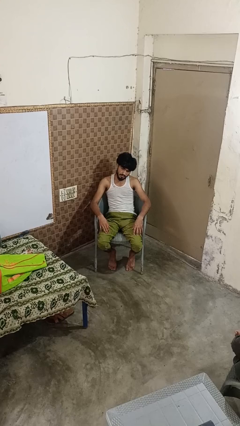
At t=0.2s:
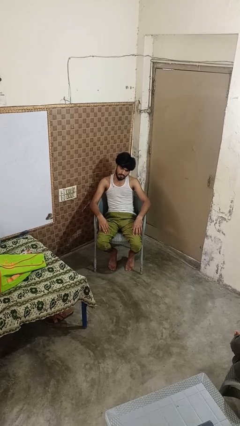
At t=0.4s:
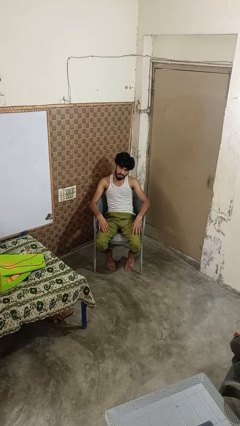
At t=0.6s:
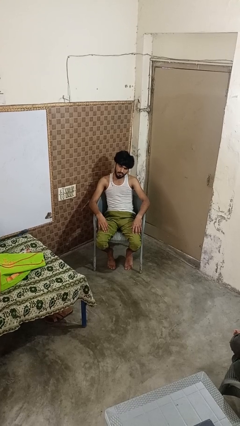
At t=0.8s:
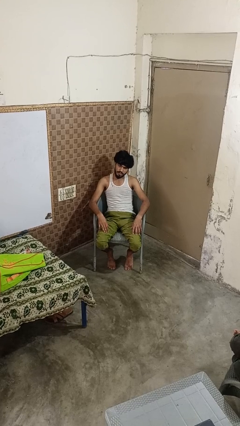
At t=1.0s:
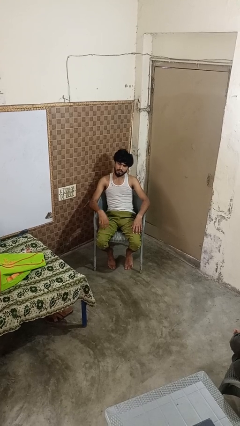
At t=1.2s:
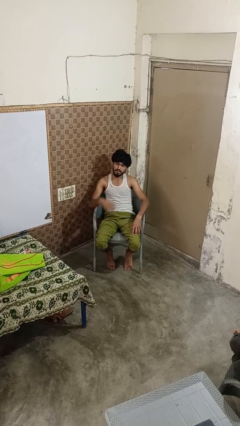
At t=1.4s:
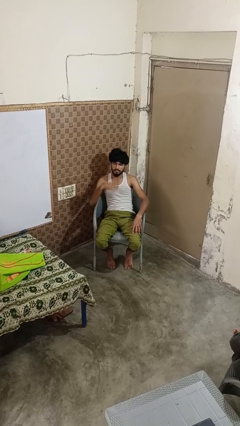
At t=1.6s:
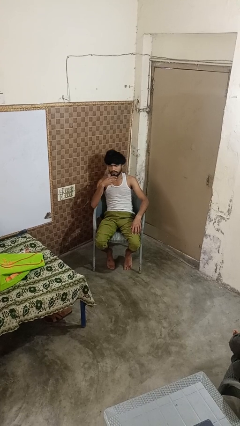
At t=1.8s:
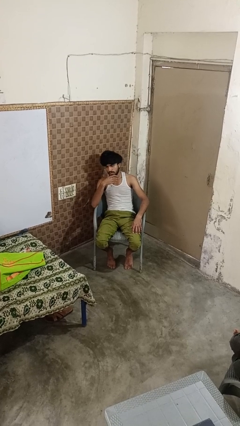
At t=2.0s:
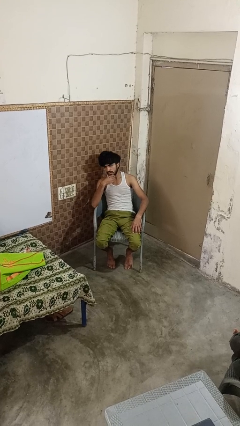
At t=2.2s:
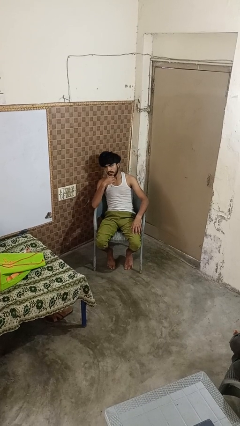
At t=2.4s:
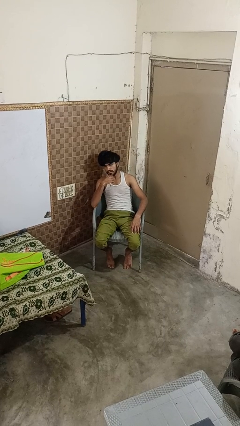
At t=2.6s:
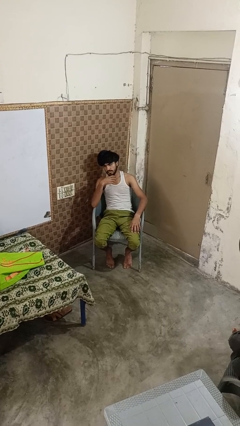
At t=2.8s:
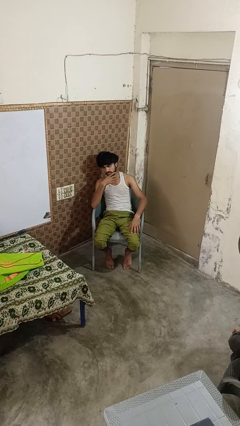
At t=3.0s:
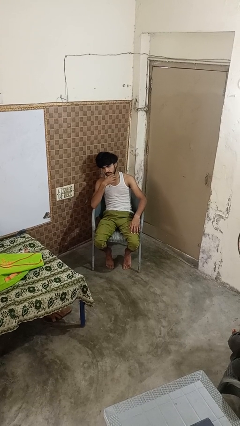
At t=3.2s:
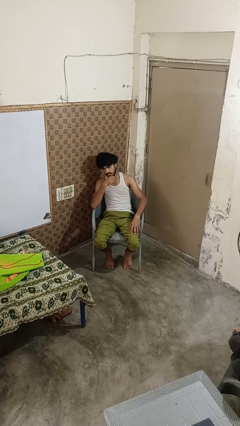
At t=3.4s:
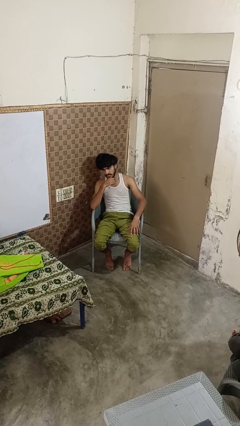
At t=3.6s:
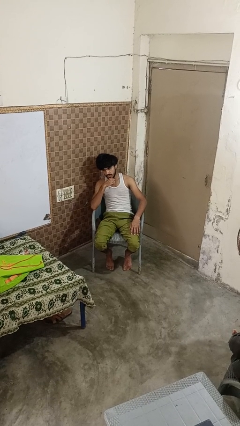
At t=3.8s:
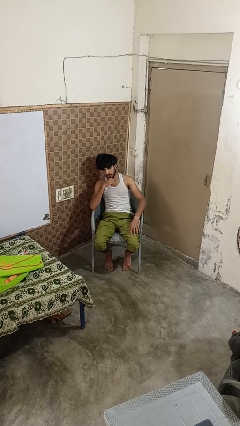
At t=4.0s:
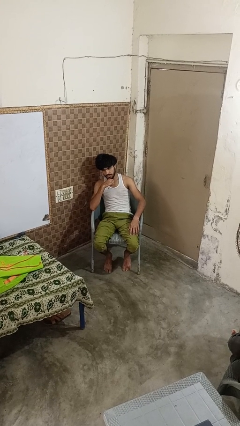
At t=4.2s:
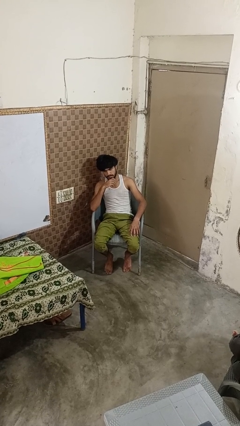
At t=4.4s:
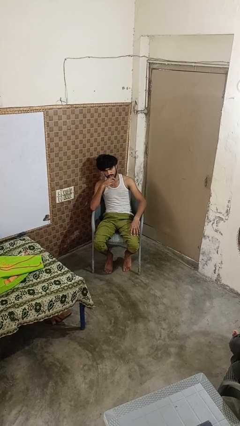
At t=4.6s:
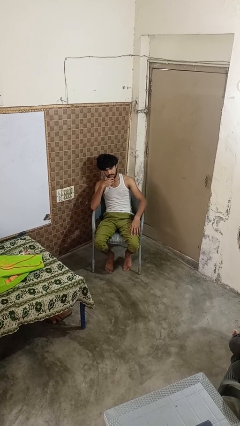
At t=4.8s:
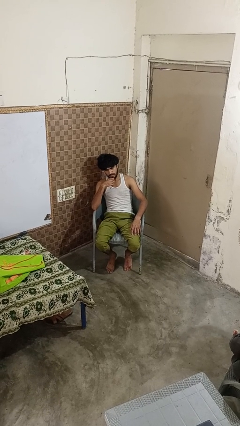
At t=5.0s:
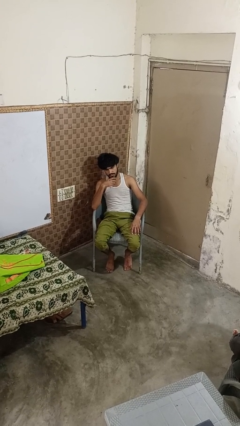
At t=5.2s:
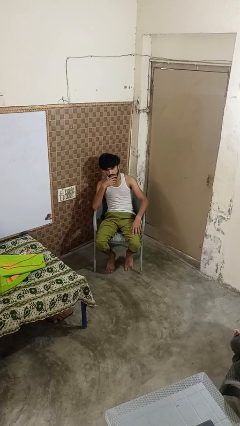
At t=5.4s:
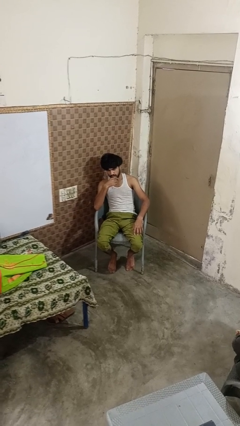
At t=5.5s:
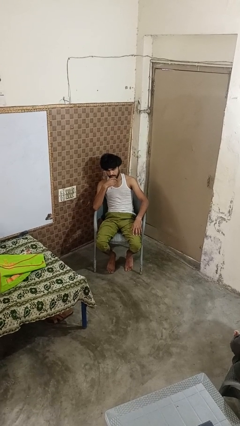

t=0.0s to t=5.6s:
person strokes chin

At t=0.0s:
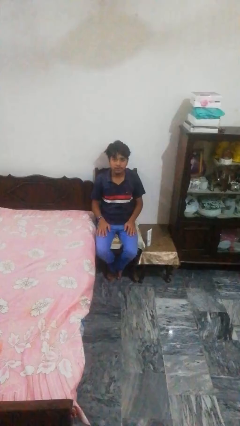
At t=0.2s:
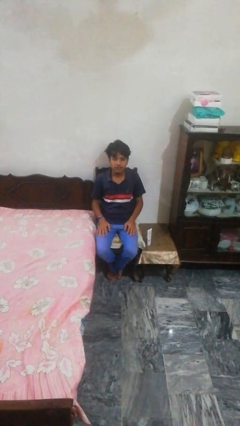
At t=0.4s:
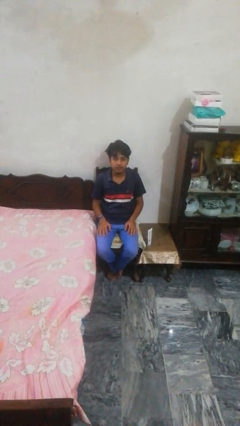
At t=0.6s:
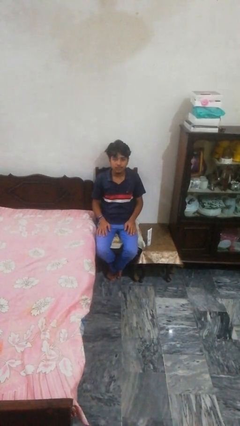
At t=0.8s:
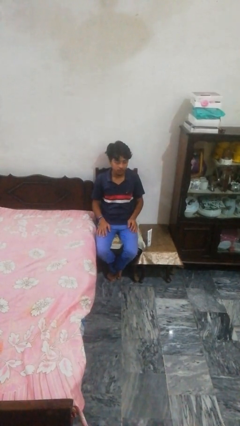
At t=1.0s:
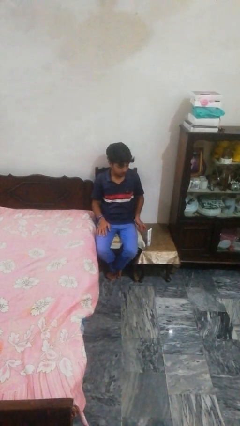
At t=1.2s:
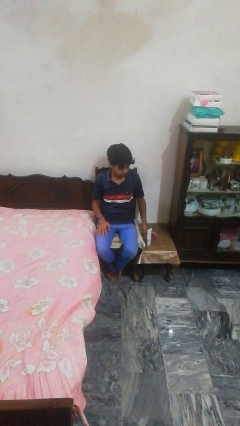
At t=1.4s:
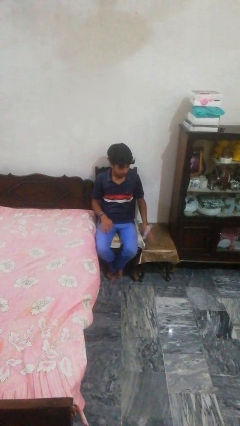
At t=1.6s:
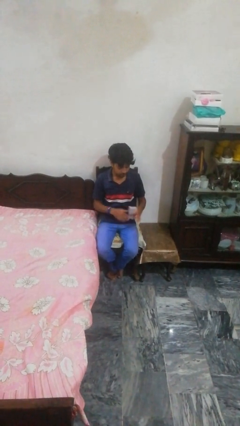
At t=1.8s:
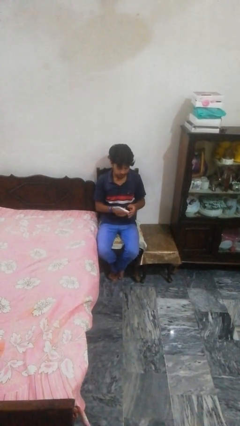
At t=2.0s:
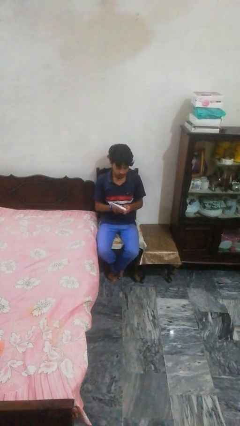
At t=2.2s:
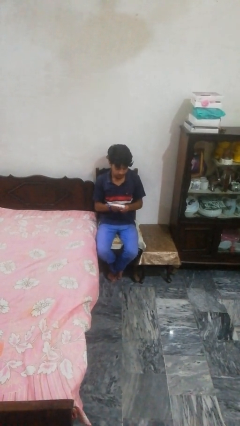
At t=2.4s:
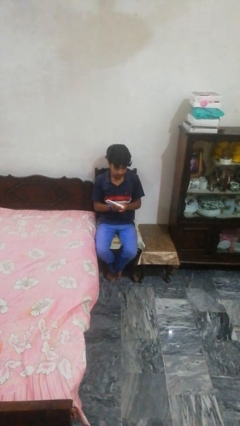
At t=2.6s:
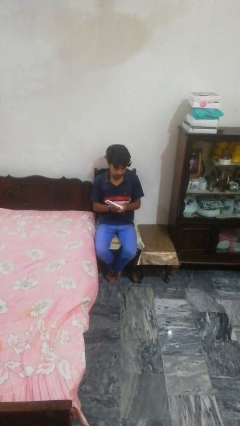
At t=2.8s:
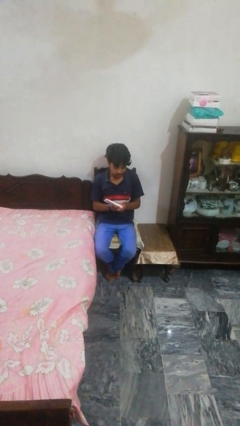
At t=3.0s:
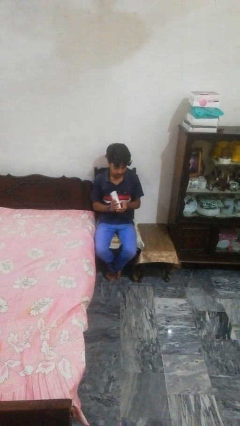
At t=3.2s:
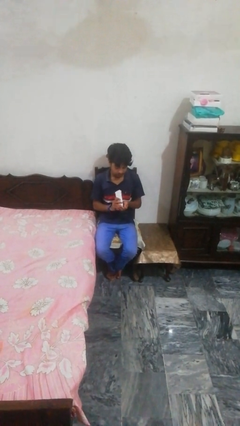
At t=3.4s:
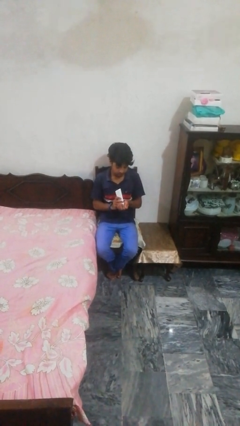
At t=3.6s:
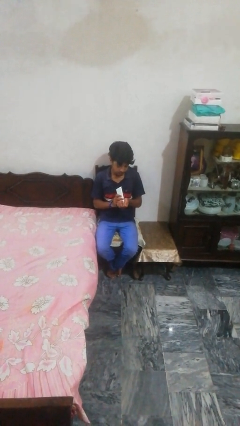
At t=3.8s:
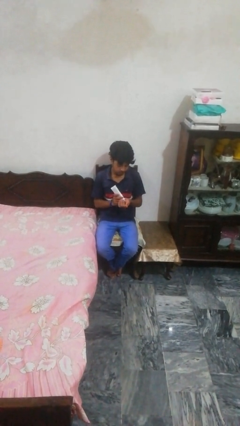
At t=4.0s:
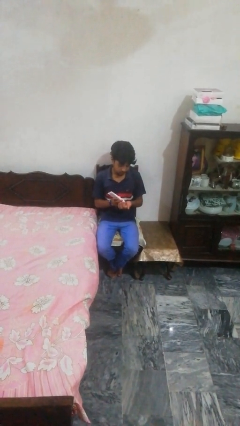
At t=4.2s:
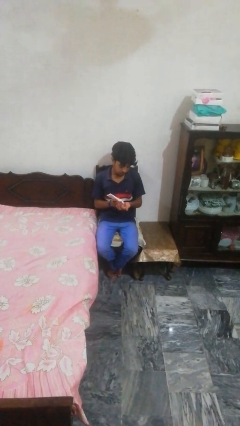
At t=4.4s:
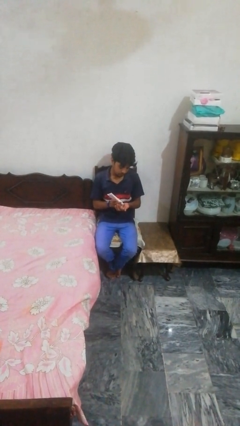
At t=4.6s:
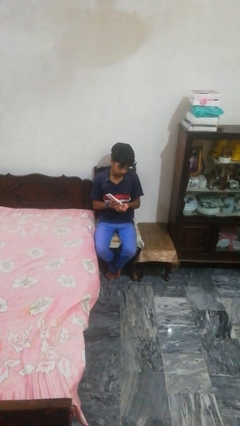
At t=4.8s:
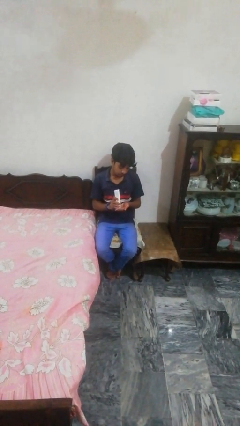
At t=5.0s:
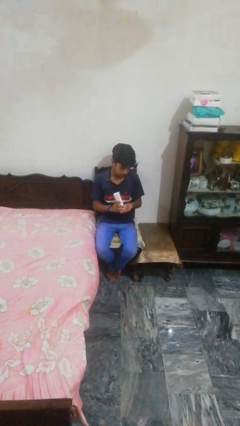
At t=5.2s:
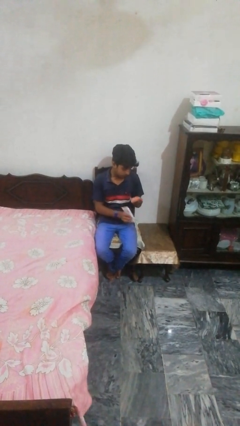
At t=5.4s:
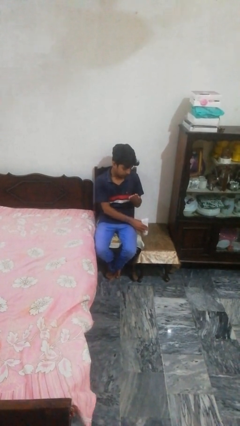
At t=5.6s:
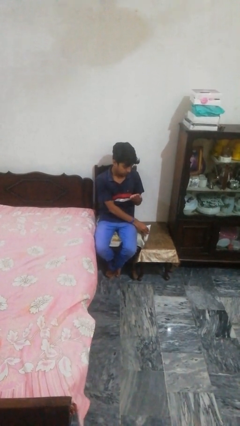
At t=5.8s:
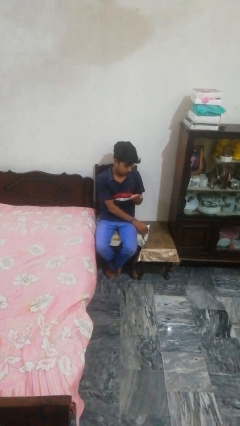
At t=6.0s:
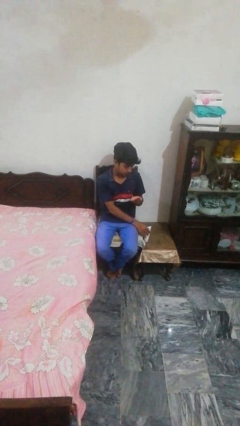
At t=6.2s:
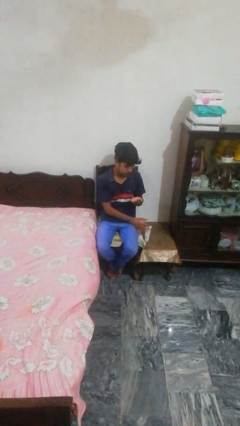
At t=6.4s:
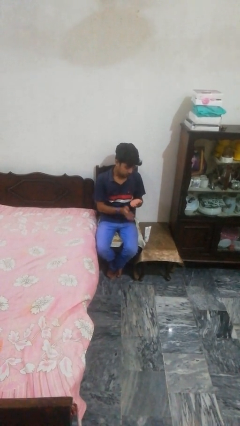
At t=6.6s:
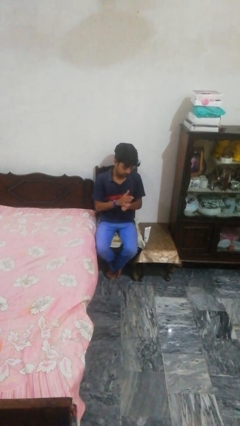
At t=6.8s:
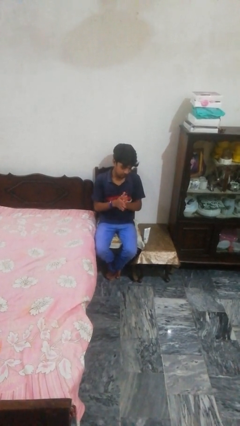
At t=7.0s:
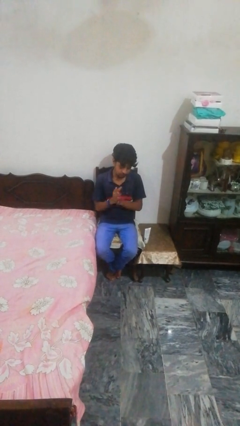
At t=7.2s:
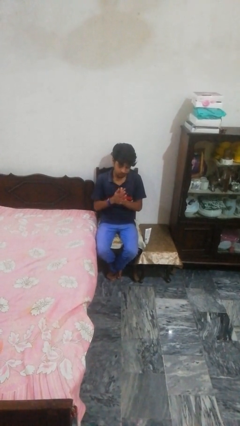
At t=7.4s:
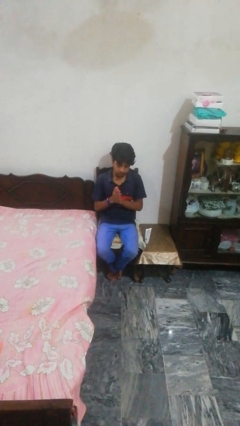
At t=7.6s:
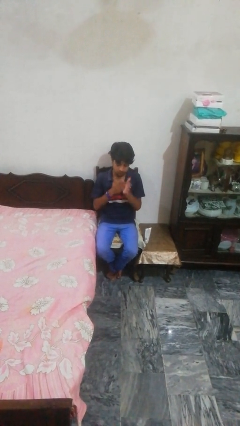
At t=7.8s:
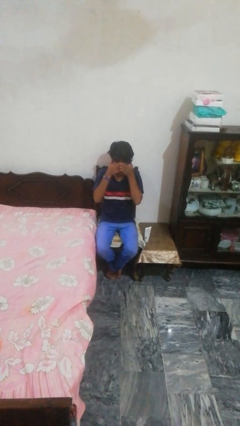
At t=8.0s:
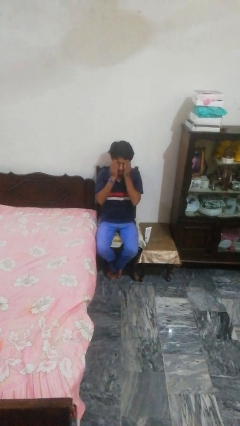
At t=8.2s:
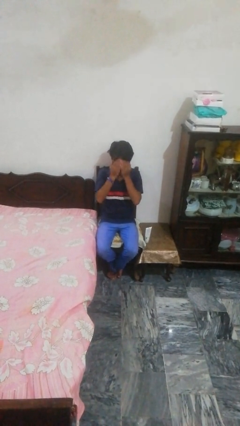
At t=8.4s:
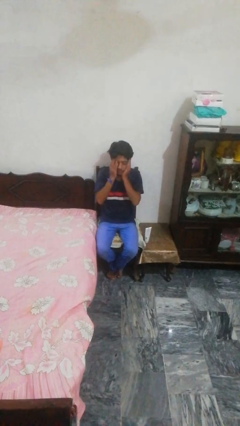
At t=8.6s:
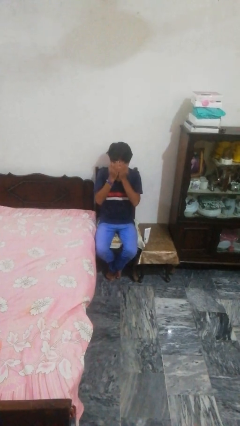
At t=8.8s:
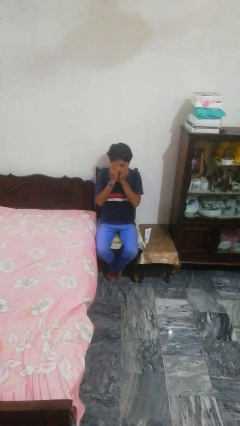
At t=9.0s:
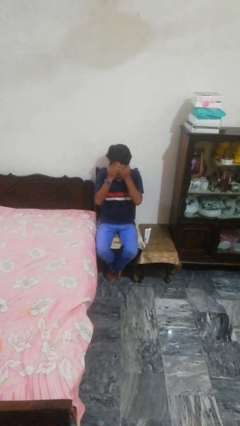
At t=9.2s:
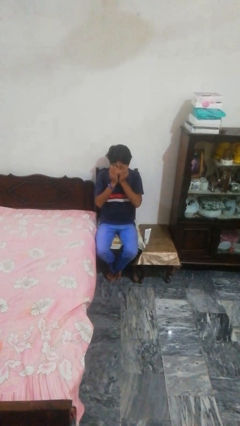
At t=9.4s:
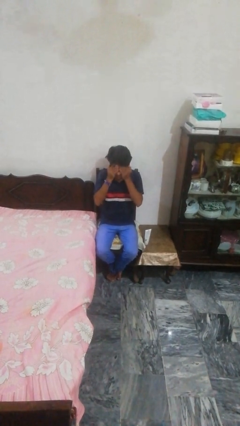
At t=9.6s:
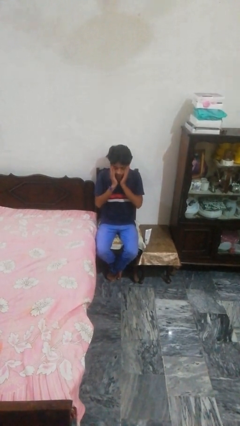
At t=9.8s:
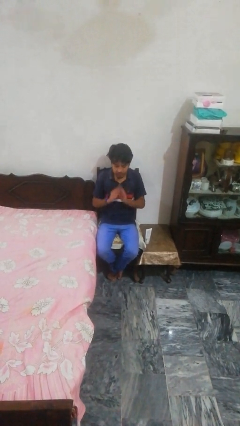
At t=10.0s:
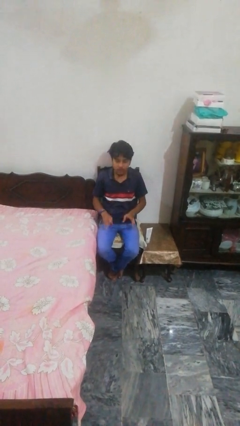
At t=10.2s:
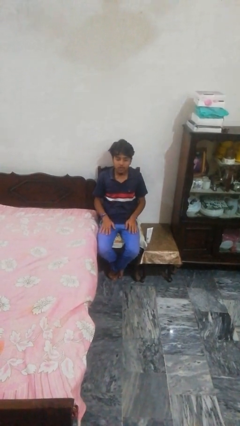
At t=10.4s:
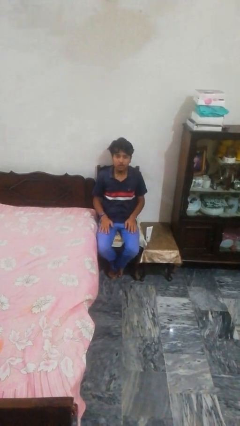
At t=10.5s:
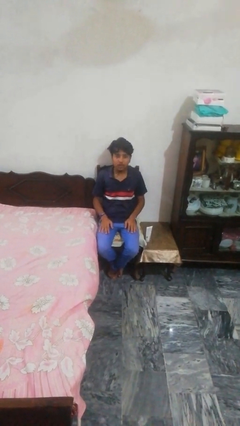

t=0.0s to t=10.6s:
person applies facial moisturizer

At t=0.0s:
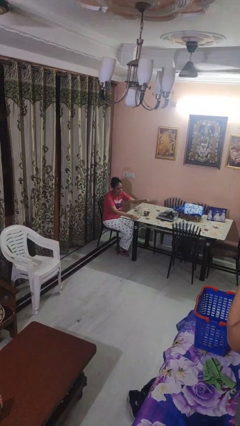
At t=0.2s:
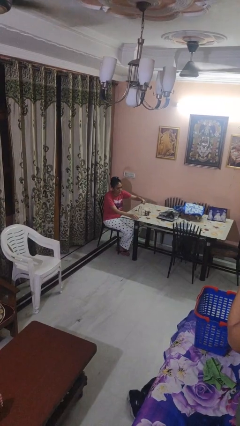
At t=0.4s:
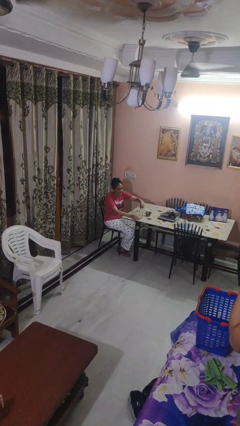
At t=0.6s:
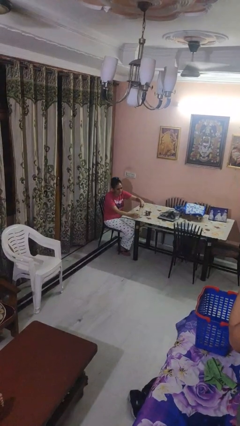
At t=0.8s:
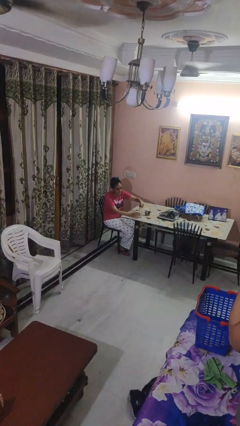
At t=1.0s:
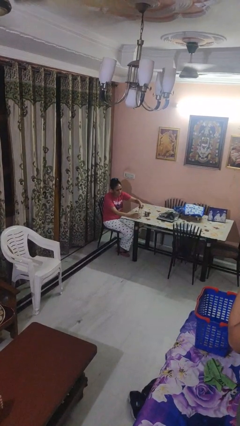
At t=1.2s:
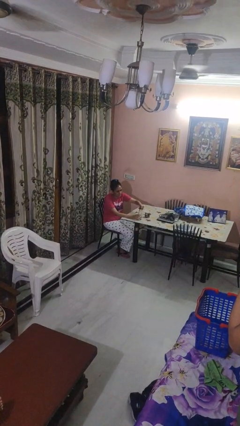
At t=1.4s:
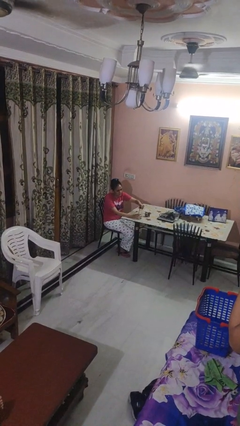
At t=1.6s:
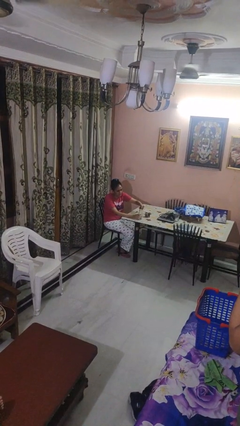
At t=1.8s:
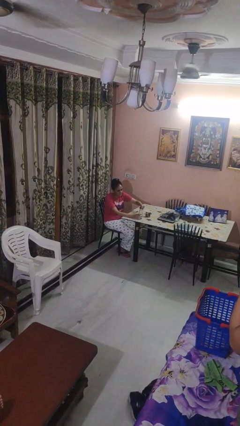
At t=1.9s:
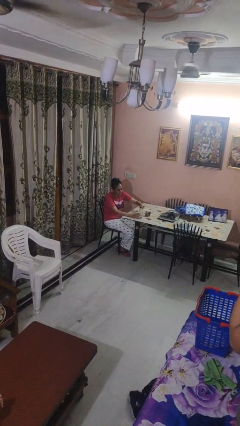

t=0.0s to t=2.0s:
person screws lid to bottle
